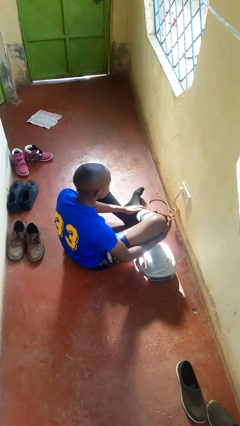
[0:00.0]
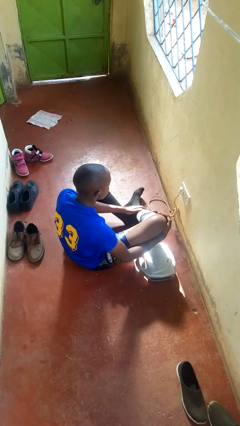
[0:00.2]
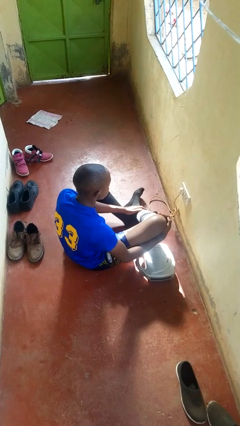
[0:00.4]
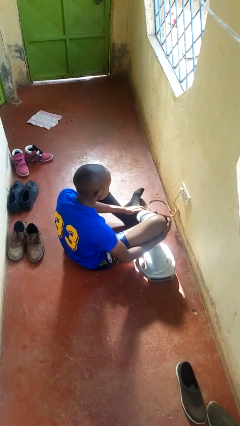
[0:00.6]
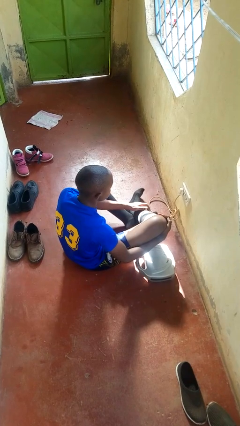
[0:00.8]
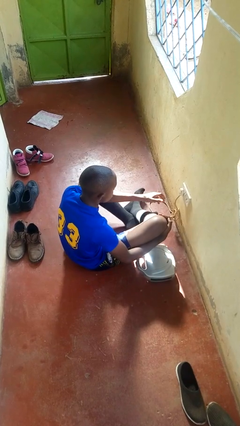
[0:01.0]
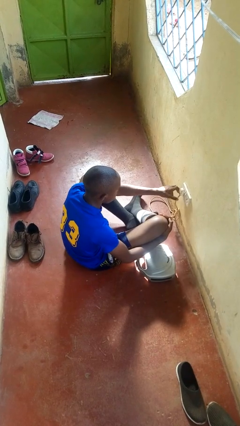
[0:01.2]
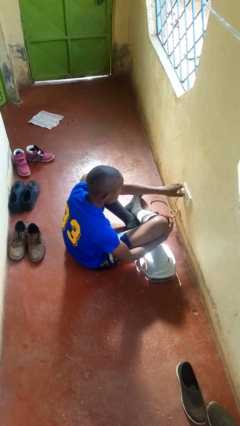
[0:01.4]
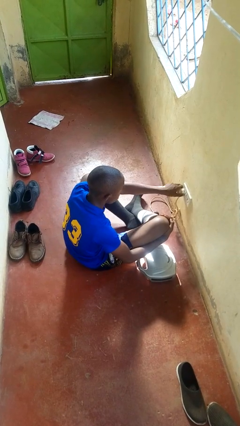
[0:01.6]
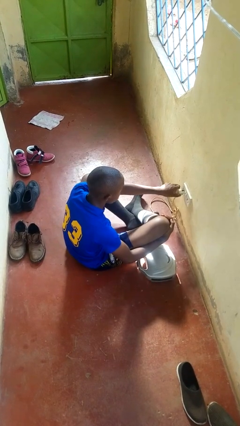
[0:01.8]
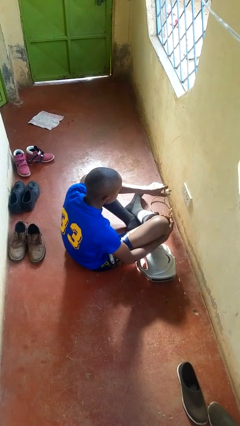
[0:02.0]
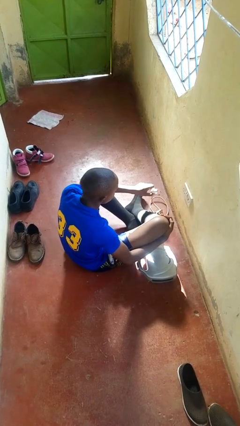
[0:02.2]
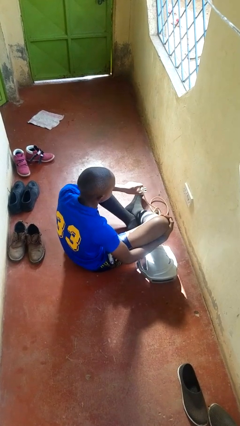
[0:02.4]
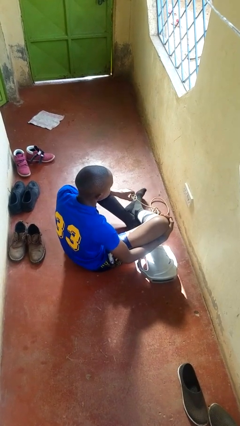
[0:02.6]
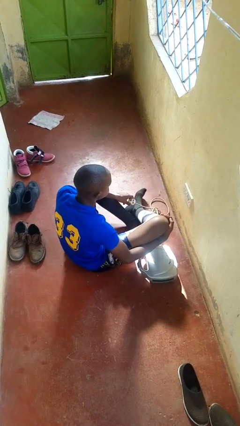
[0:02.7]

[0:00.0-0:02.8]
person unplugs from electrical socket

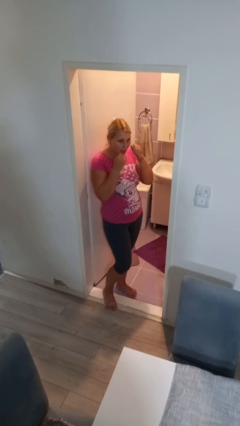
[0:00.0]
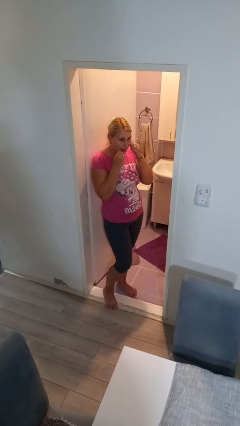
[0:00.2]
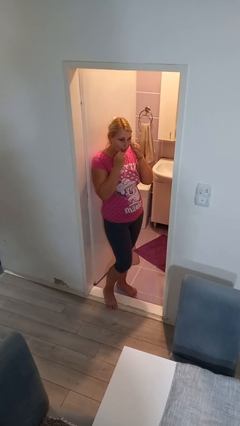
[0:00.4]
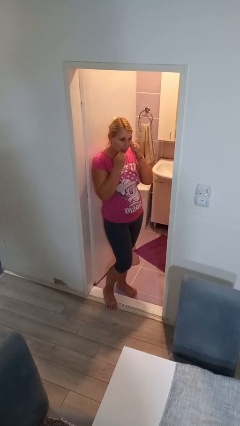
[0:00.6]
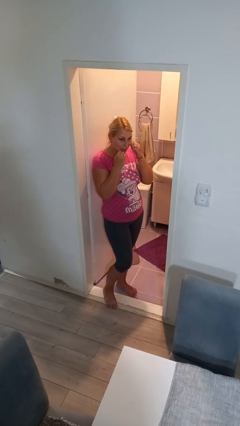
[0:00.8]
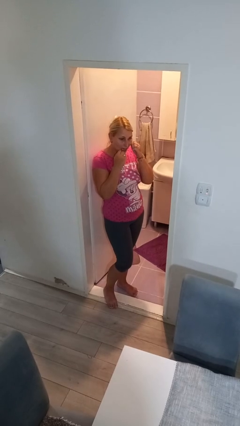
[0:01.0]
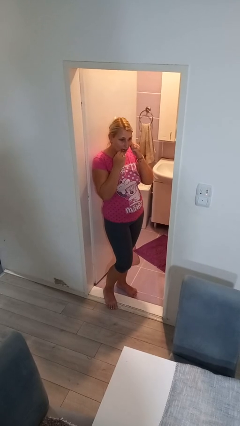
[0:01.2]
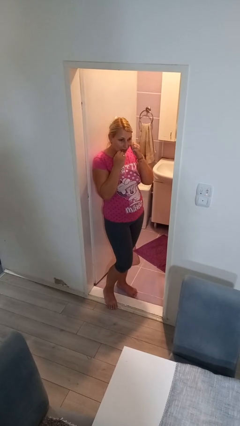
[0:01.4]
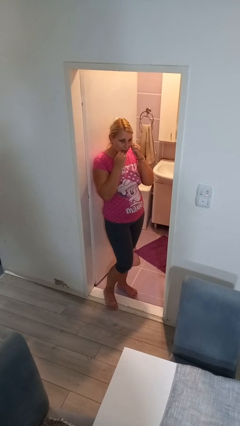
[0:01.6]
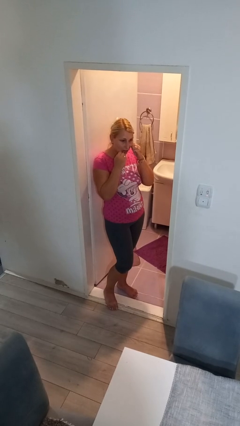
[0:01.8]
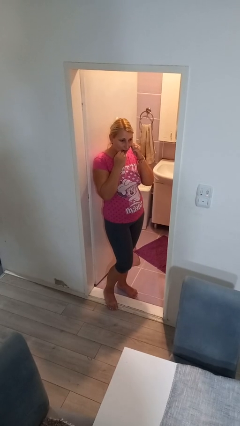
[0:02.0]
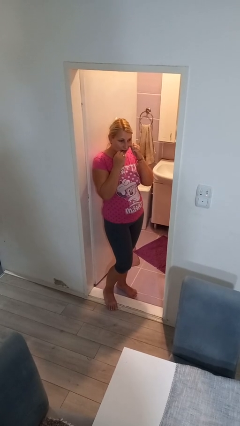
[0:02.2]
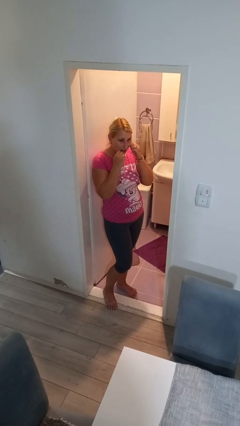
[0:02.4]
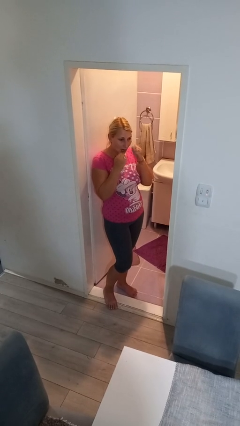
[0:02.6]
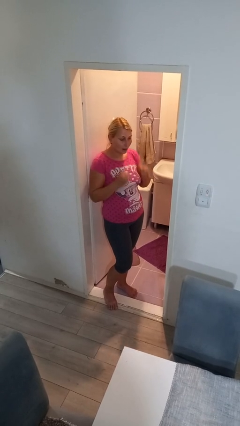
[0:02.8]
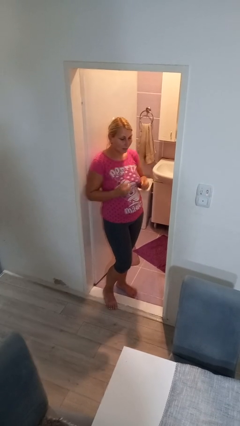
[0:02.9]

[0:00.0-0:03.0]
person flosses

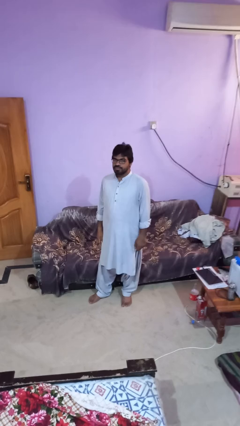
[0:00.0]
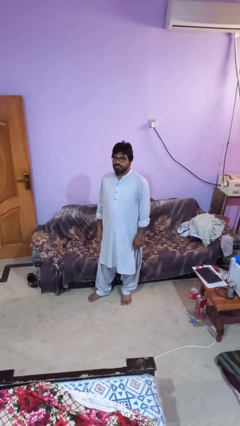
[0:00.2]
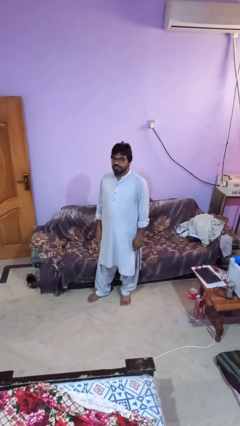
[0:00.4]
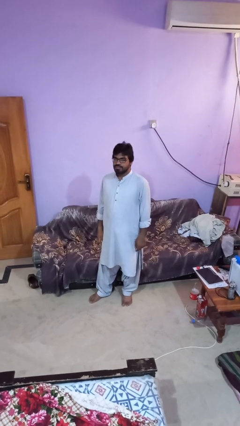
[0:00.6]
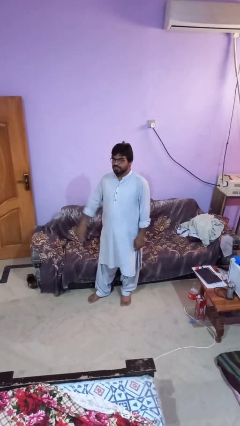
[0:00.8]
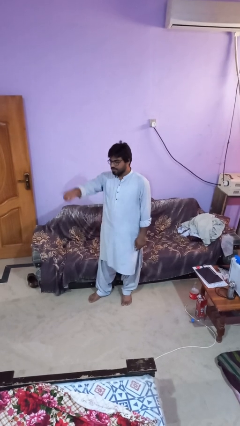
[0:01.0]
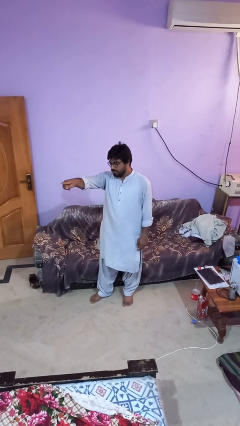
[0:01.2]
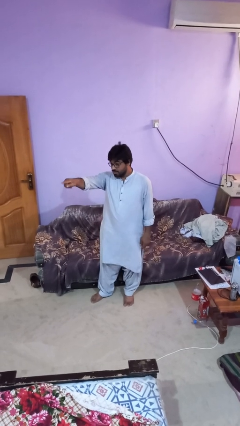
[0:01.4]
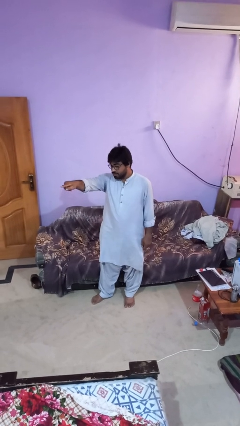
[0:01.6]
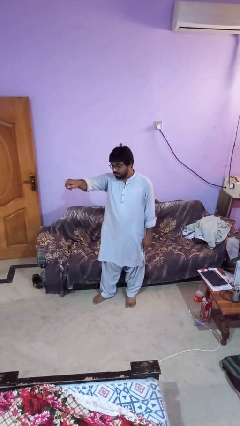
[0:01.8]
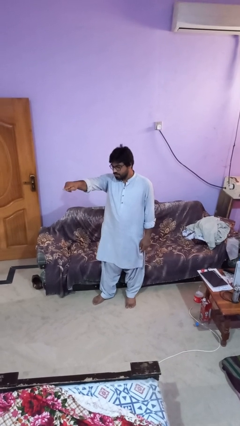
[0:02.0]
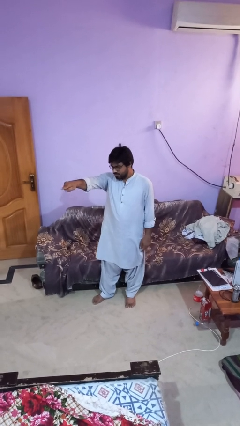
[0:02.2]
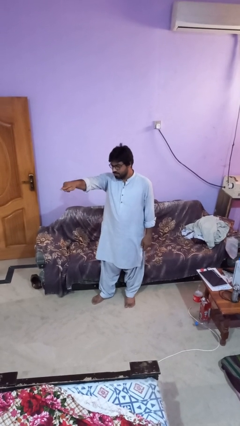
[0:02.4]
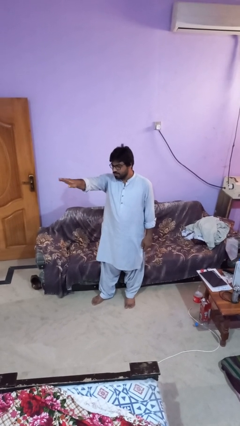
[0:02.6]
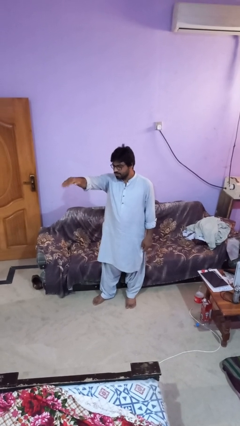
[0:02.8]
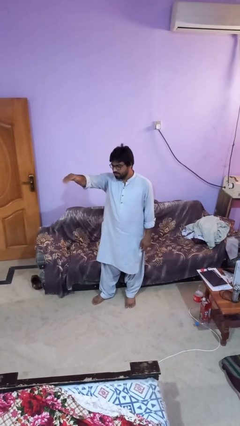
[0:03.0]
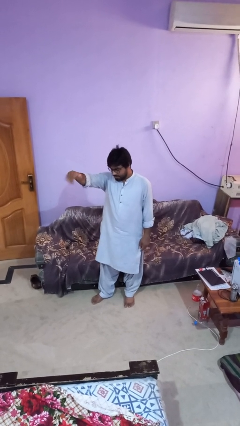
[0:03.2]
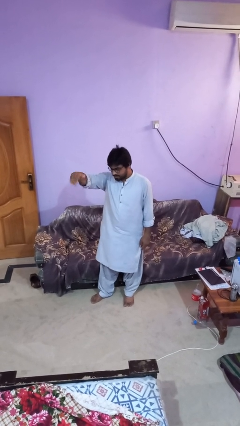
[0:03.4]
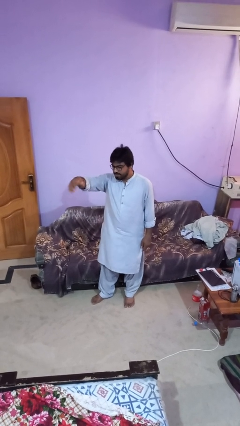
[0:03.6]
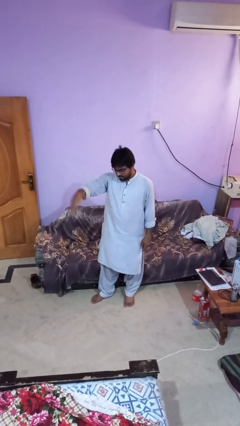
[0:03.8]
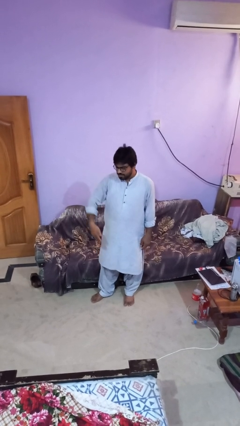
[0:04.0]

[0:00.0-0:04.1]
person gestures come here

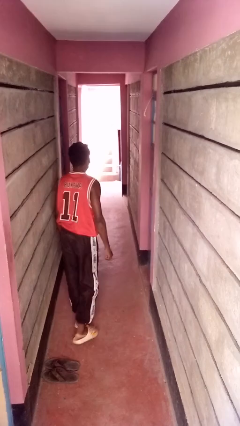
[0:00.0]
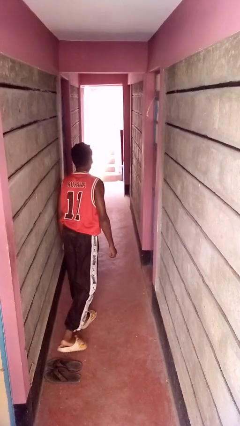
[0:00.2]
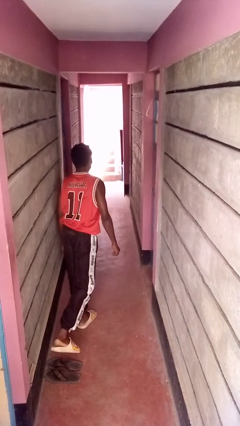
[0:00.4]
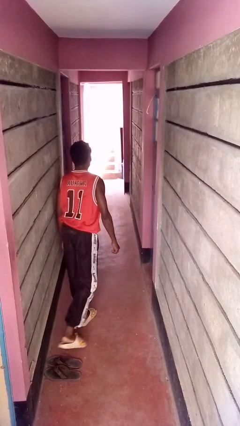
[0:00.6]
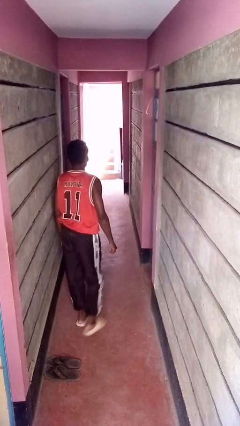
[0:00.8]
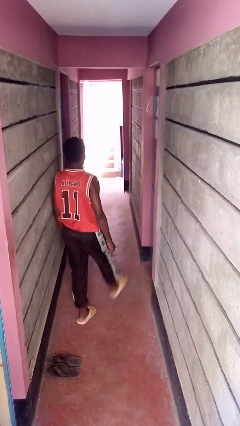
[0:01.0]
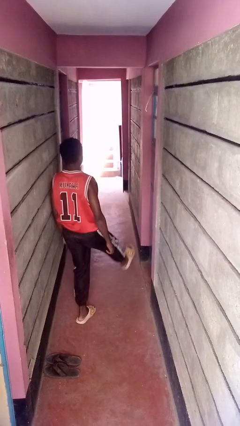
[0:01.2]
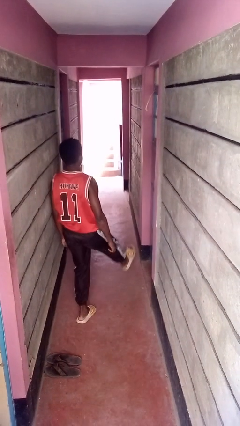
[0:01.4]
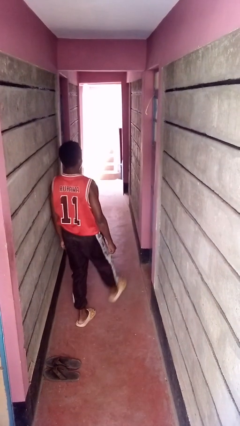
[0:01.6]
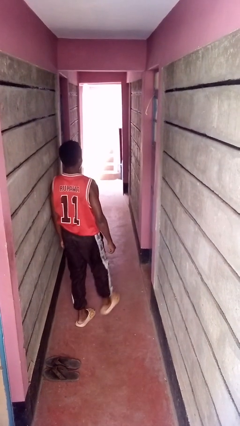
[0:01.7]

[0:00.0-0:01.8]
person wiggles hips

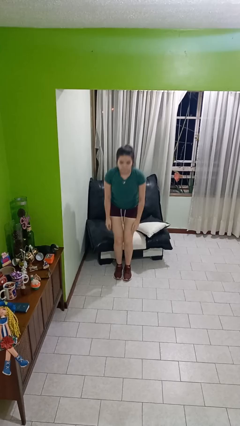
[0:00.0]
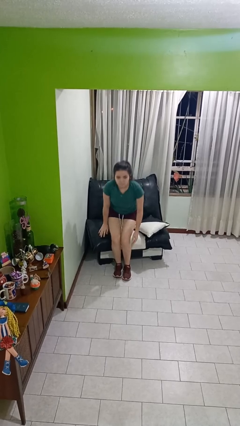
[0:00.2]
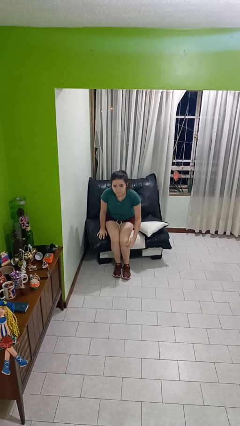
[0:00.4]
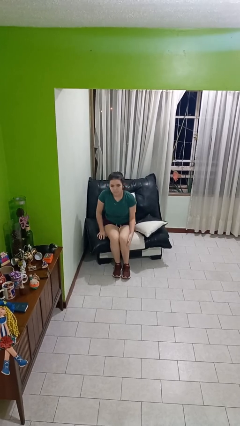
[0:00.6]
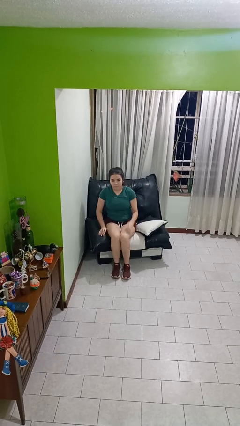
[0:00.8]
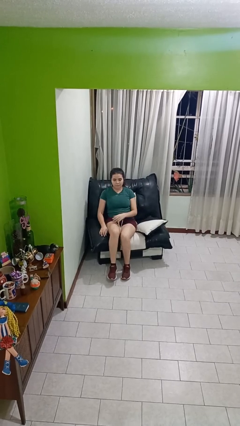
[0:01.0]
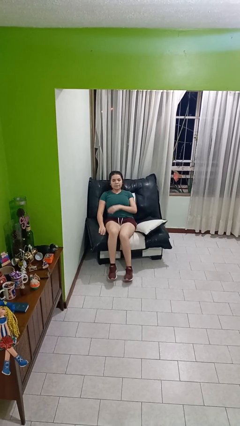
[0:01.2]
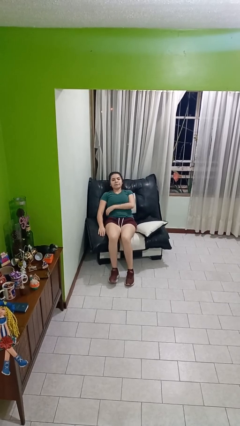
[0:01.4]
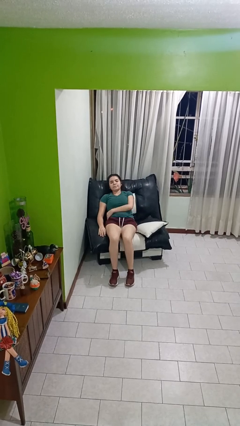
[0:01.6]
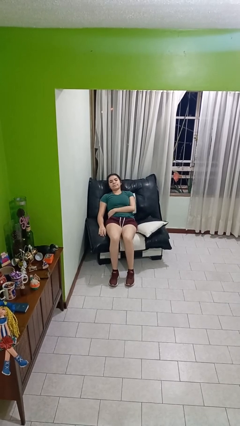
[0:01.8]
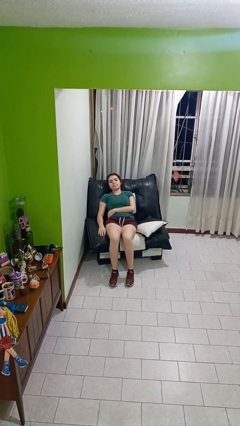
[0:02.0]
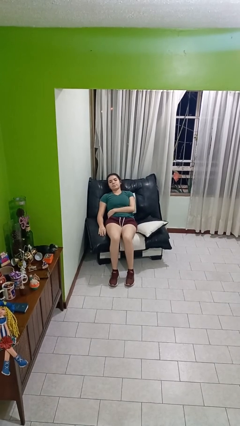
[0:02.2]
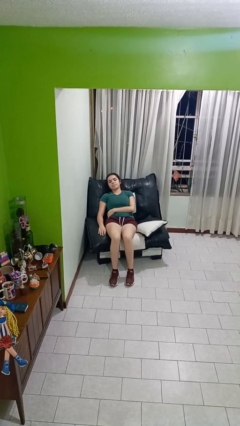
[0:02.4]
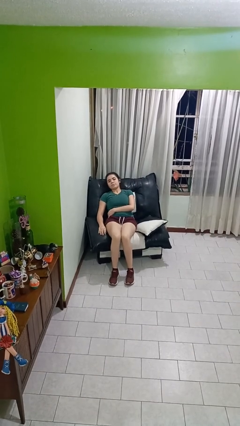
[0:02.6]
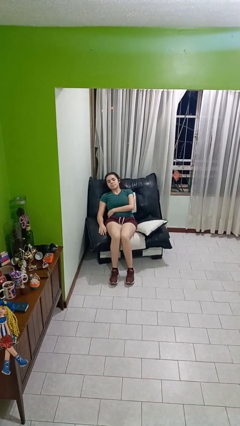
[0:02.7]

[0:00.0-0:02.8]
person lies down on couch

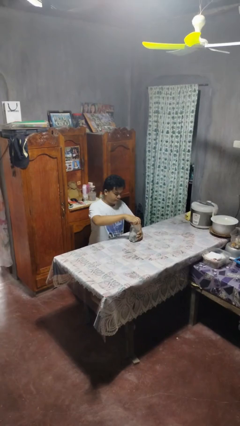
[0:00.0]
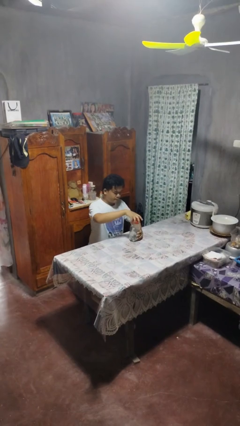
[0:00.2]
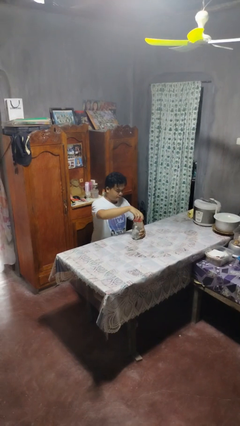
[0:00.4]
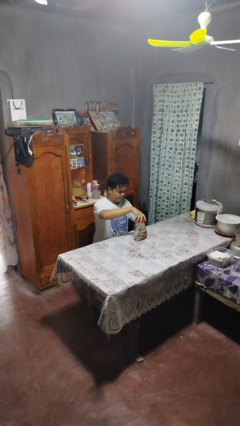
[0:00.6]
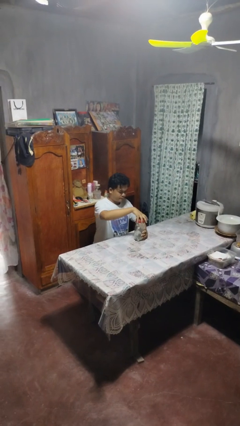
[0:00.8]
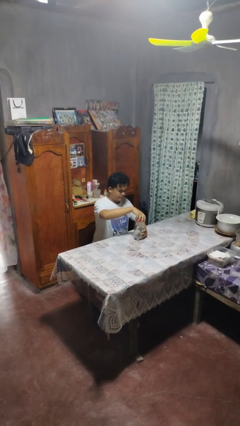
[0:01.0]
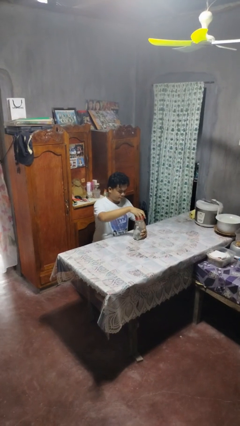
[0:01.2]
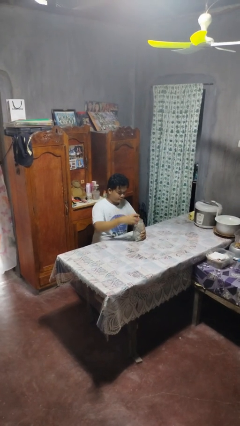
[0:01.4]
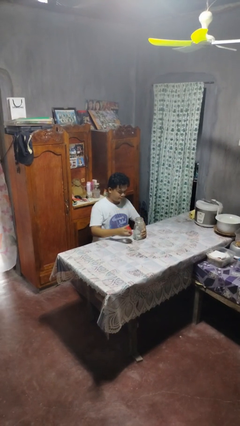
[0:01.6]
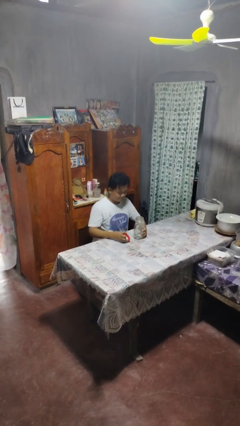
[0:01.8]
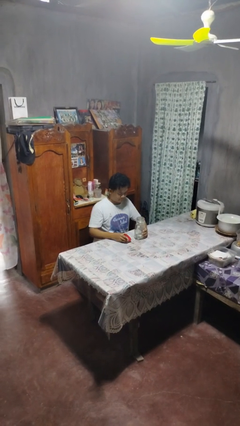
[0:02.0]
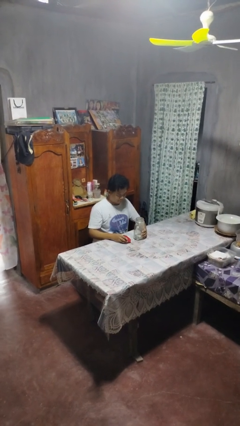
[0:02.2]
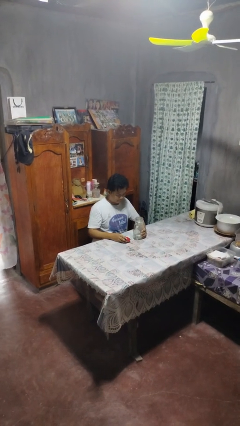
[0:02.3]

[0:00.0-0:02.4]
person opens jar

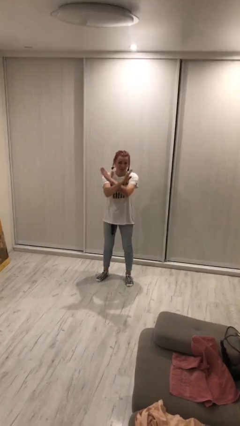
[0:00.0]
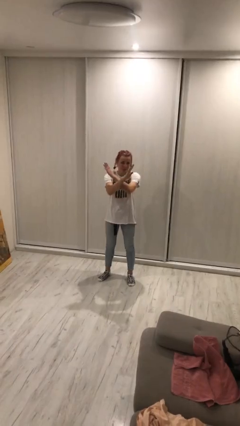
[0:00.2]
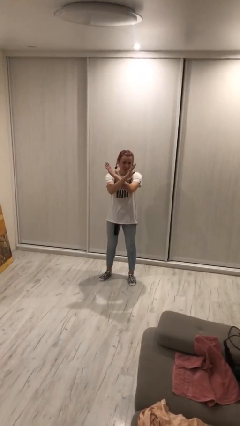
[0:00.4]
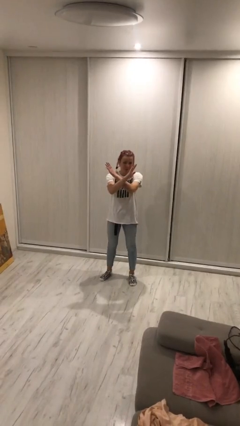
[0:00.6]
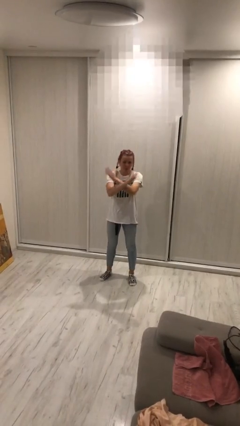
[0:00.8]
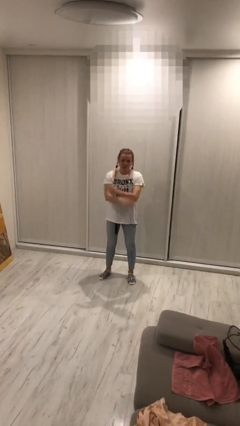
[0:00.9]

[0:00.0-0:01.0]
person gestures arms x
